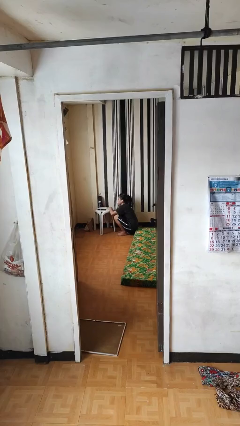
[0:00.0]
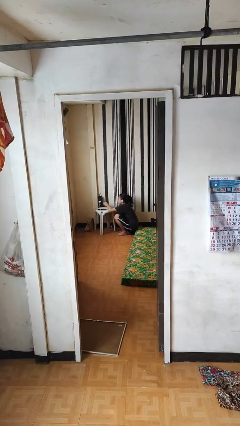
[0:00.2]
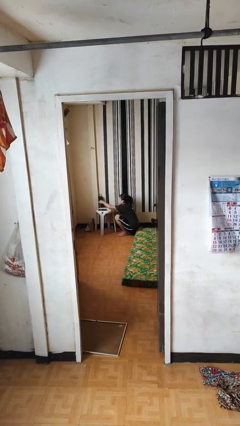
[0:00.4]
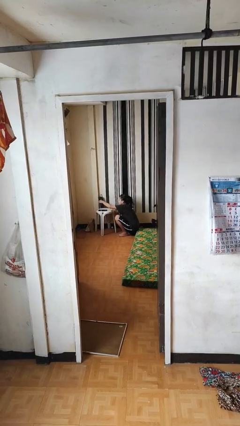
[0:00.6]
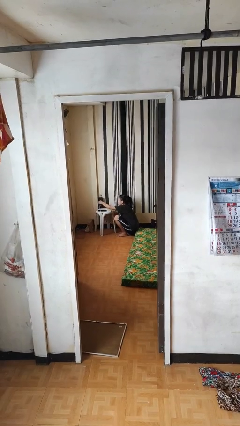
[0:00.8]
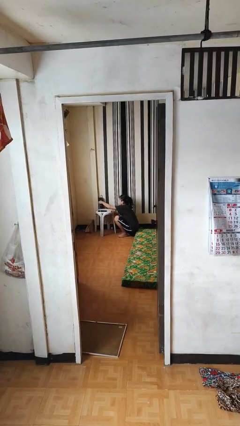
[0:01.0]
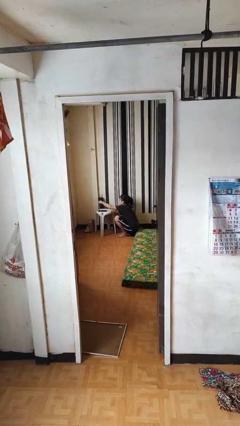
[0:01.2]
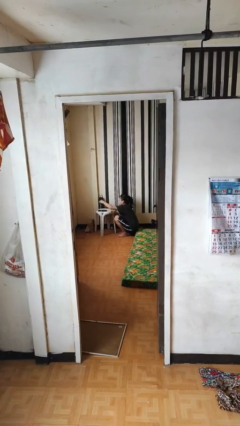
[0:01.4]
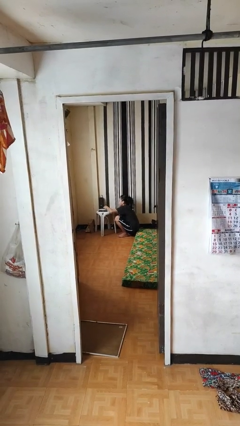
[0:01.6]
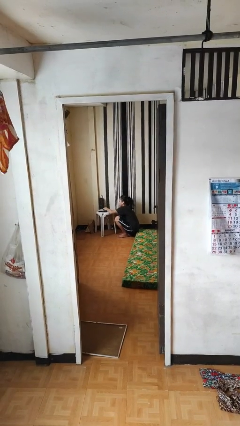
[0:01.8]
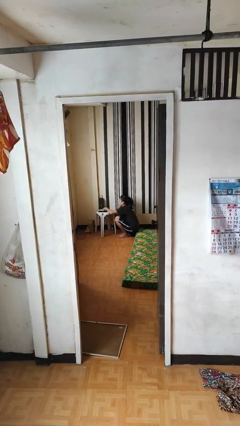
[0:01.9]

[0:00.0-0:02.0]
person unplugs from electrical socket

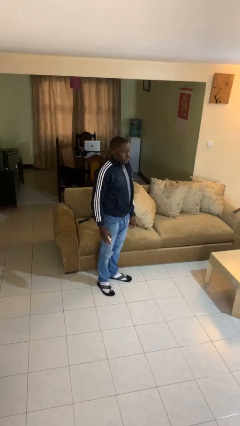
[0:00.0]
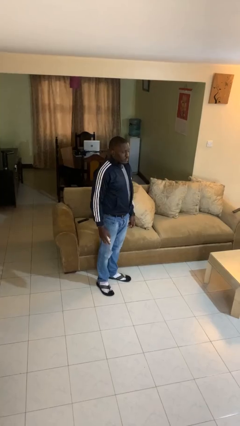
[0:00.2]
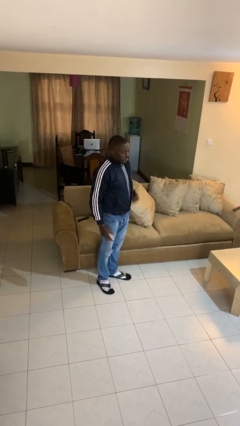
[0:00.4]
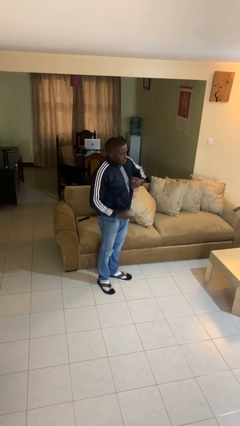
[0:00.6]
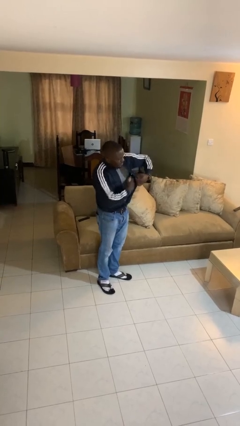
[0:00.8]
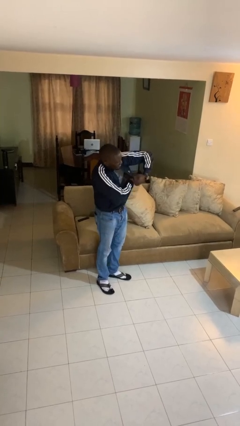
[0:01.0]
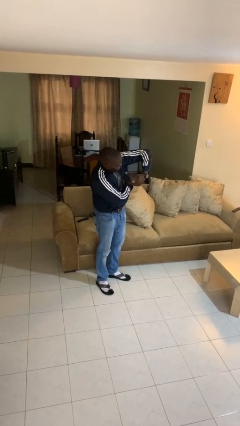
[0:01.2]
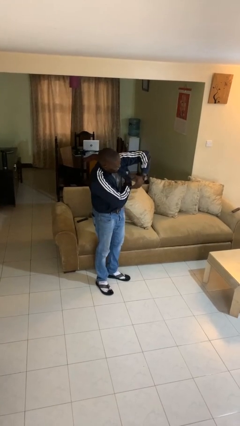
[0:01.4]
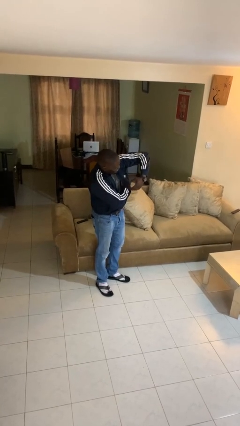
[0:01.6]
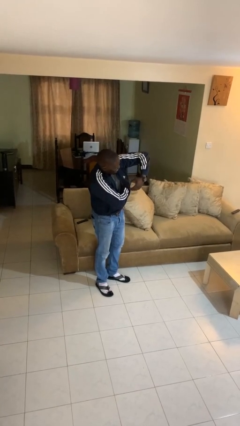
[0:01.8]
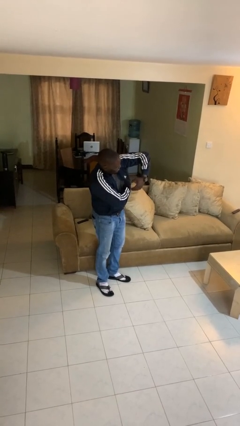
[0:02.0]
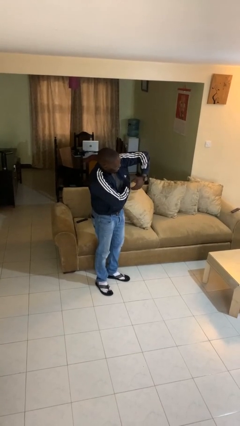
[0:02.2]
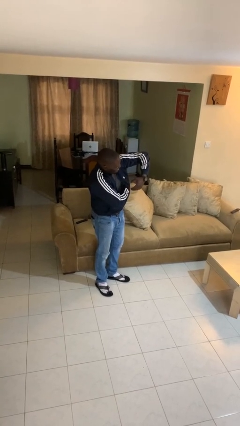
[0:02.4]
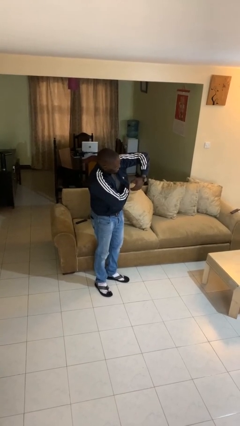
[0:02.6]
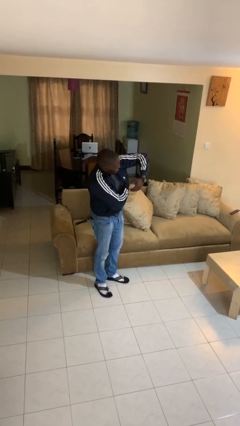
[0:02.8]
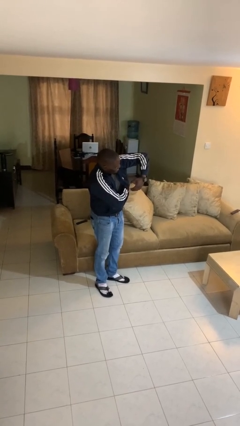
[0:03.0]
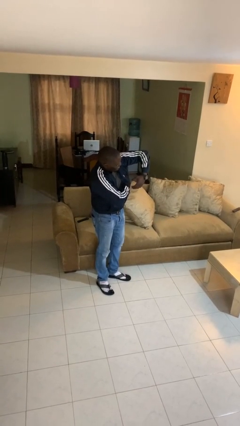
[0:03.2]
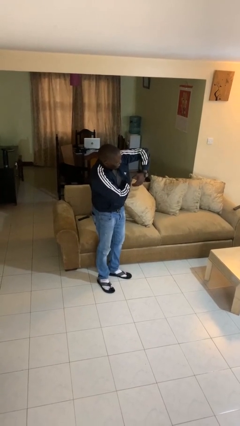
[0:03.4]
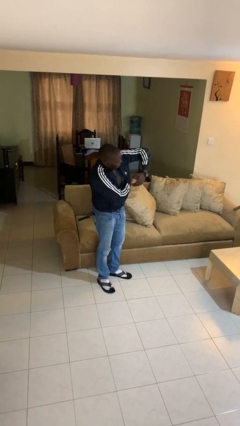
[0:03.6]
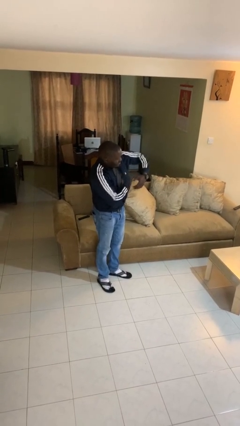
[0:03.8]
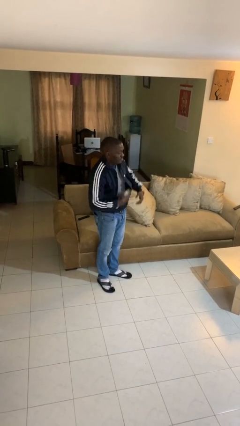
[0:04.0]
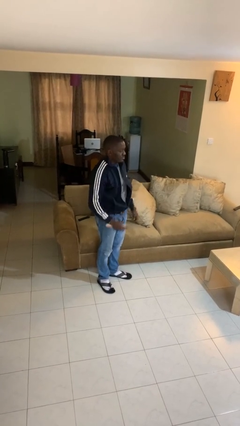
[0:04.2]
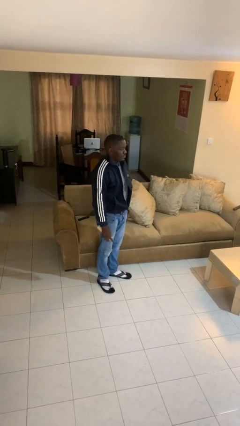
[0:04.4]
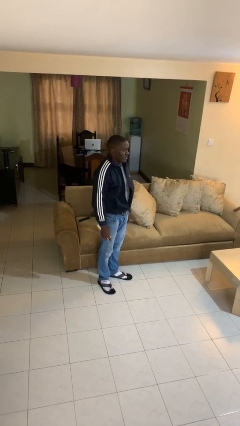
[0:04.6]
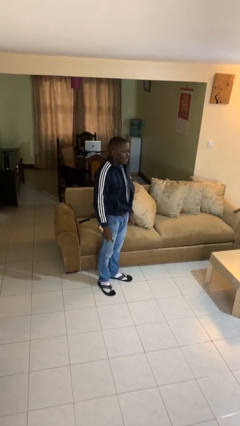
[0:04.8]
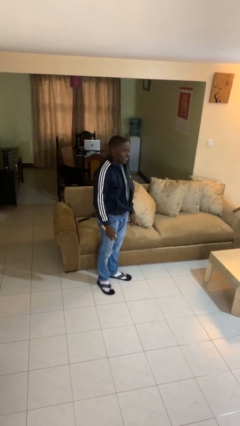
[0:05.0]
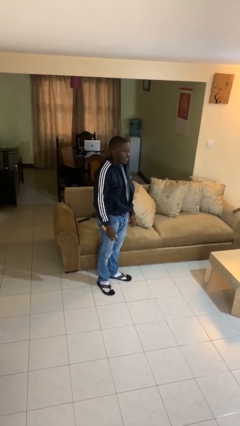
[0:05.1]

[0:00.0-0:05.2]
person applies deodorant

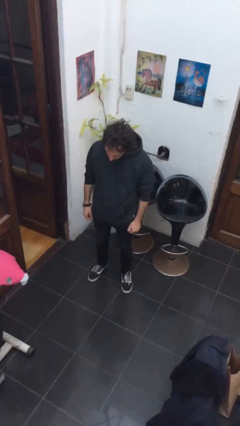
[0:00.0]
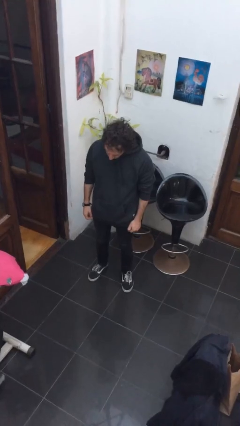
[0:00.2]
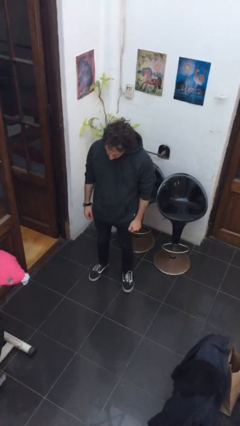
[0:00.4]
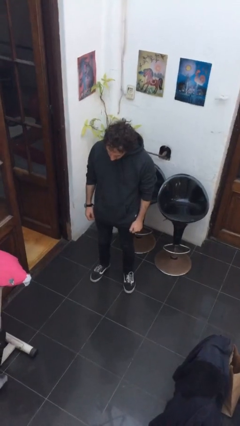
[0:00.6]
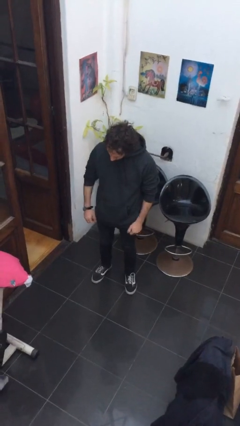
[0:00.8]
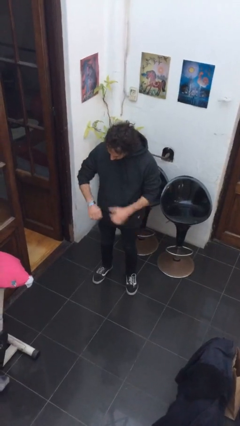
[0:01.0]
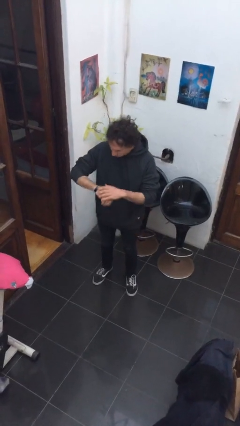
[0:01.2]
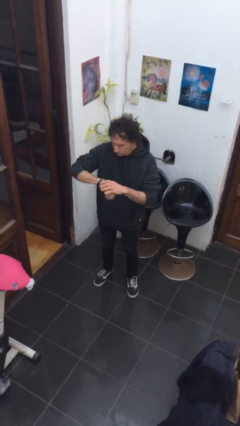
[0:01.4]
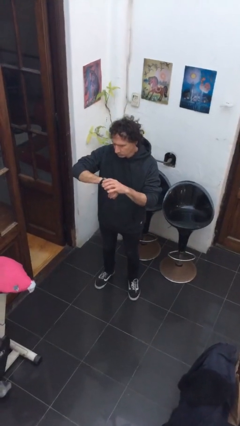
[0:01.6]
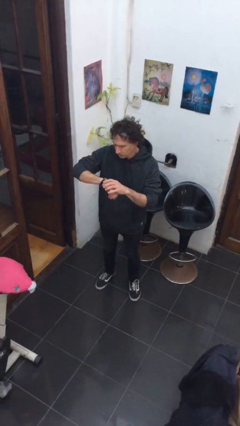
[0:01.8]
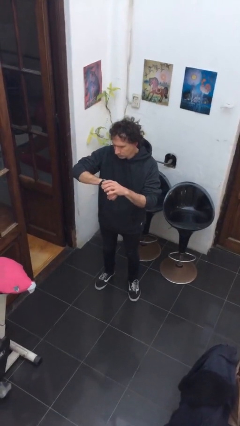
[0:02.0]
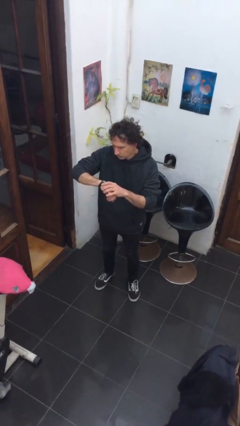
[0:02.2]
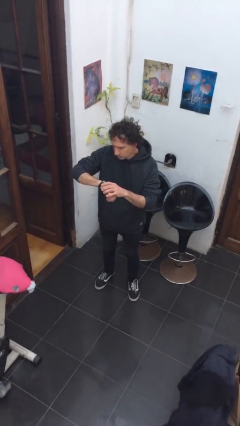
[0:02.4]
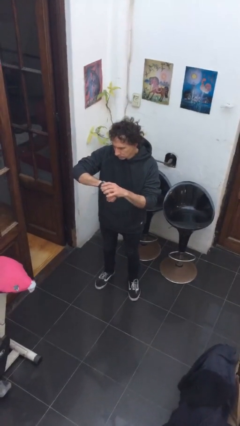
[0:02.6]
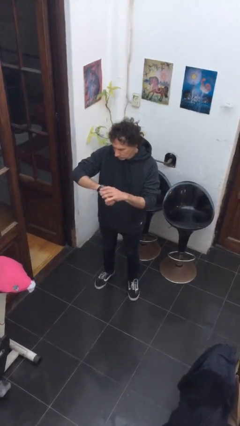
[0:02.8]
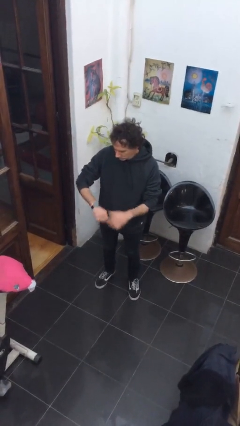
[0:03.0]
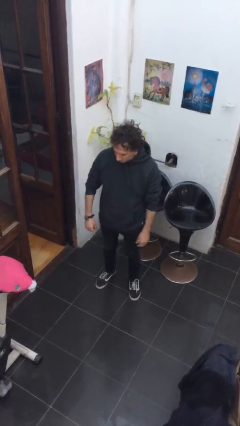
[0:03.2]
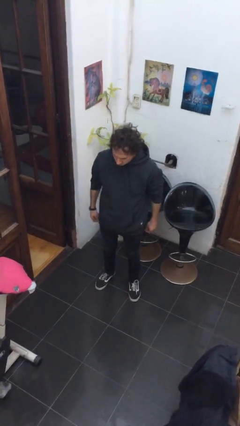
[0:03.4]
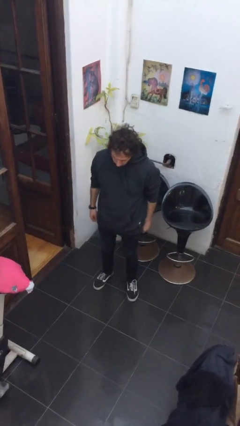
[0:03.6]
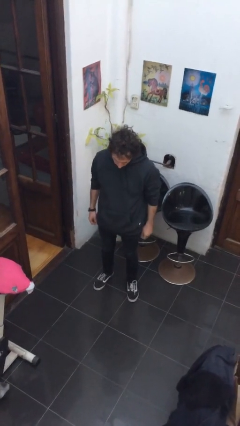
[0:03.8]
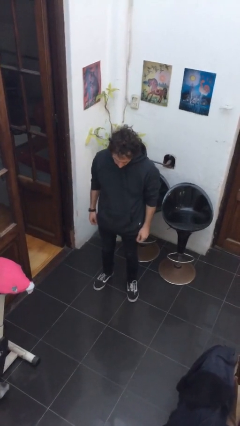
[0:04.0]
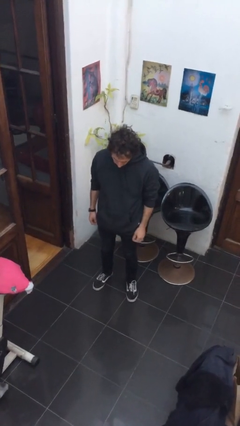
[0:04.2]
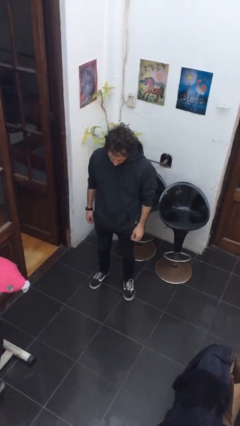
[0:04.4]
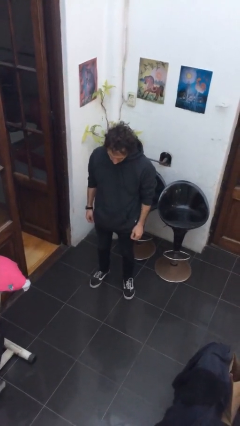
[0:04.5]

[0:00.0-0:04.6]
person looks at wristwatch

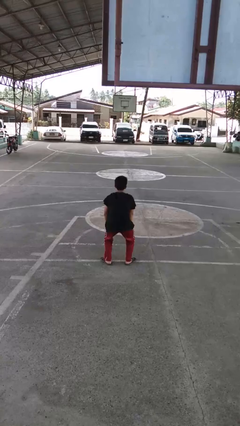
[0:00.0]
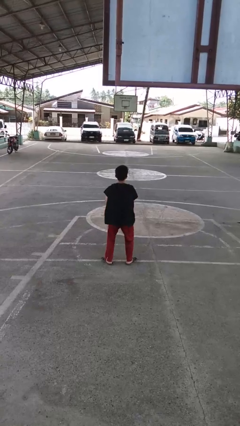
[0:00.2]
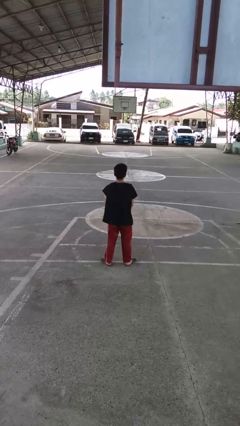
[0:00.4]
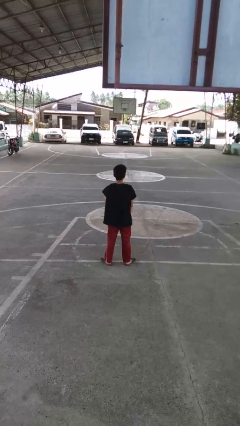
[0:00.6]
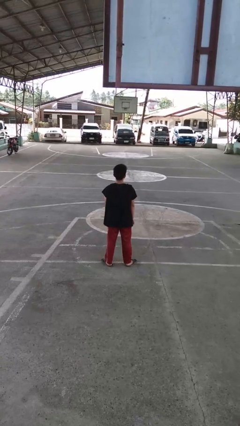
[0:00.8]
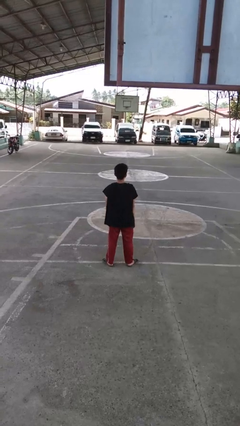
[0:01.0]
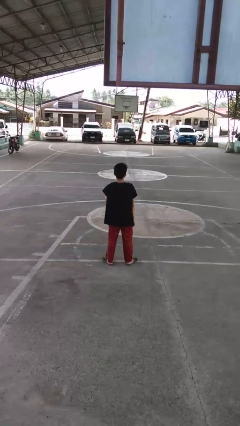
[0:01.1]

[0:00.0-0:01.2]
person stands up

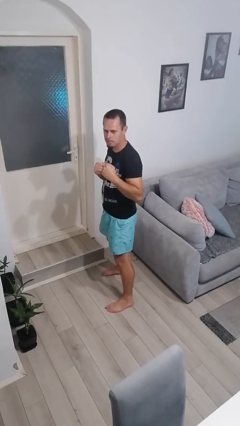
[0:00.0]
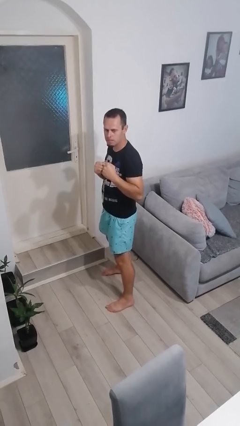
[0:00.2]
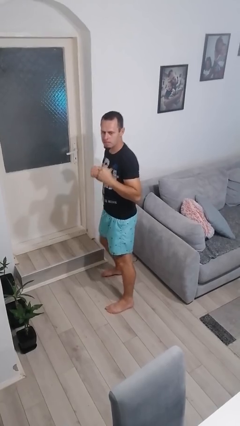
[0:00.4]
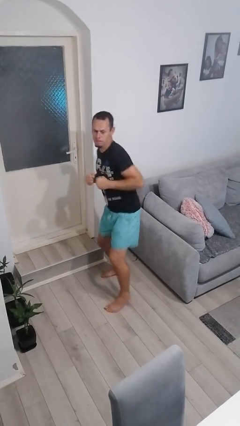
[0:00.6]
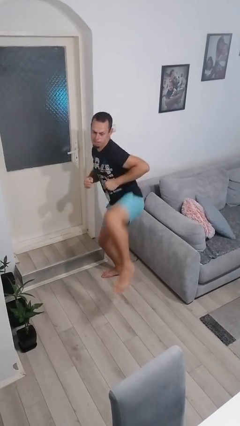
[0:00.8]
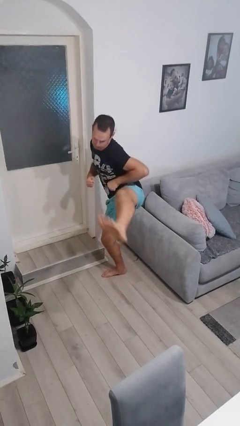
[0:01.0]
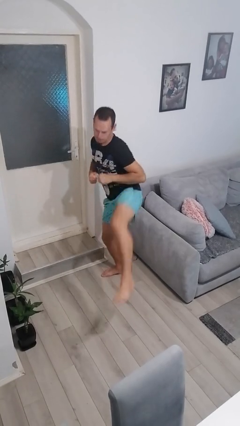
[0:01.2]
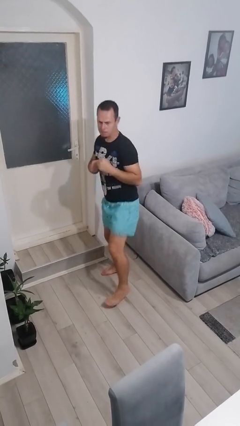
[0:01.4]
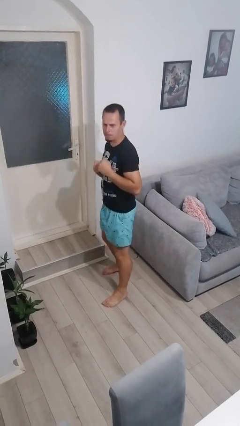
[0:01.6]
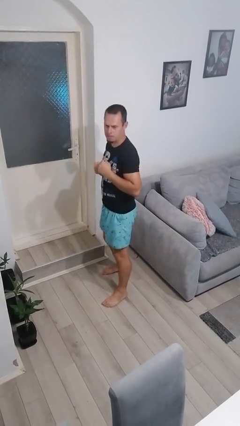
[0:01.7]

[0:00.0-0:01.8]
person karate kicks

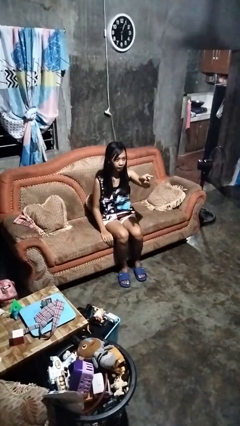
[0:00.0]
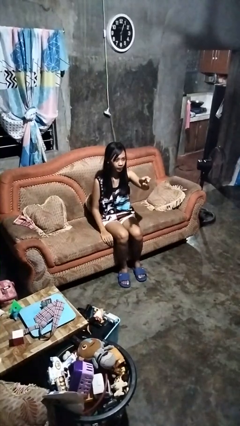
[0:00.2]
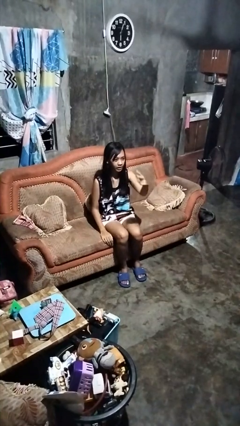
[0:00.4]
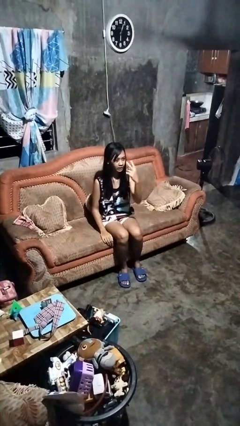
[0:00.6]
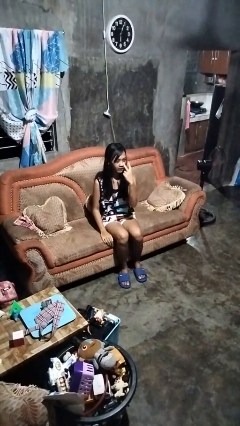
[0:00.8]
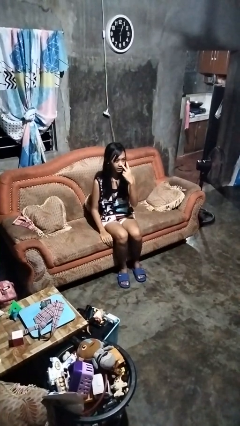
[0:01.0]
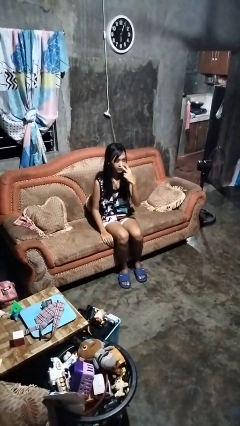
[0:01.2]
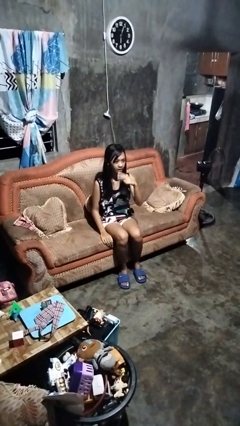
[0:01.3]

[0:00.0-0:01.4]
person gestures watch closely

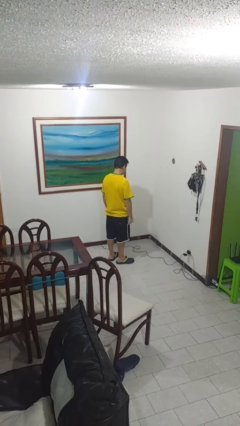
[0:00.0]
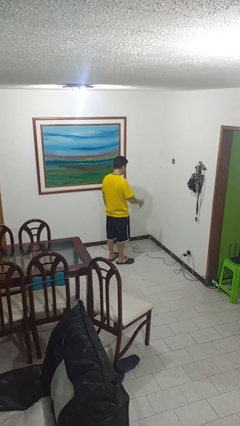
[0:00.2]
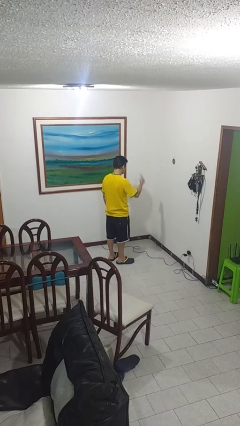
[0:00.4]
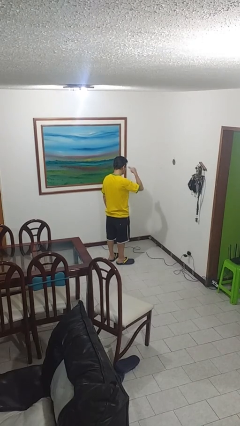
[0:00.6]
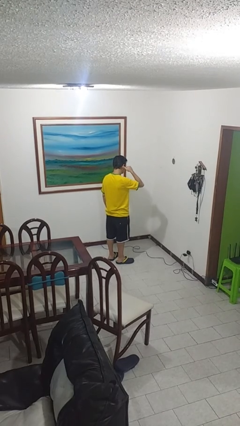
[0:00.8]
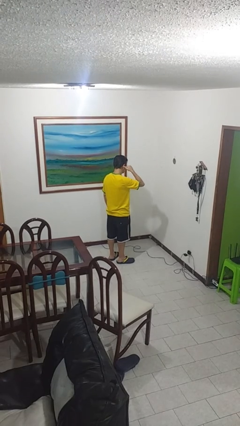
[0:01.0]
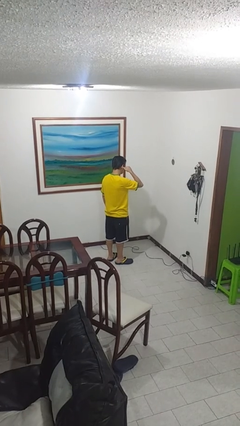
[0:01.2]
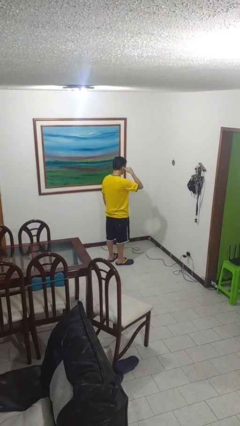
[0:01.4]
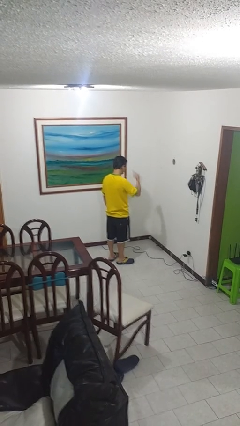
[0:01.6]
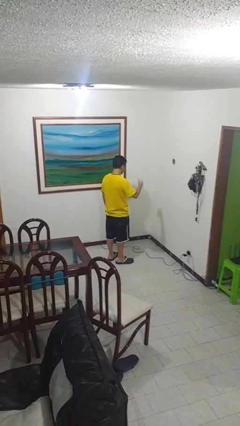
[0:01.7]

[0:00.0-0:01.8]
person gestures call me
